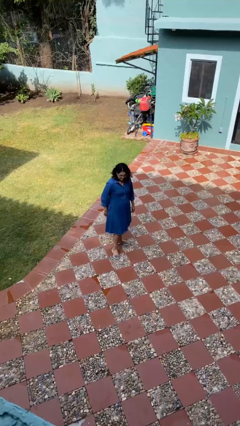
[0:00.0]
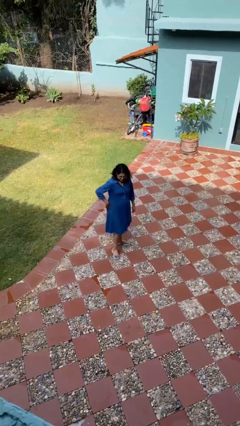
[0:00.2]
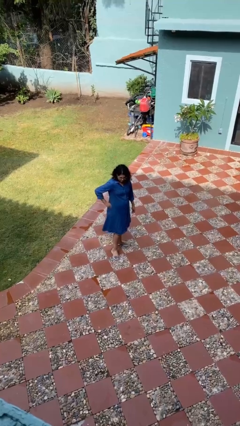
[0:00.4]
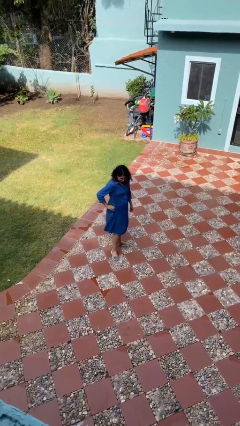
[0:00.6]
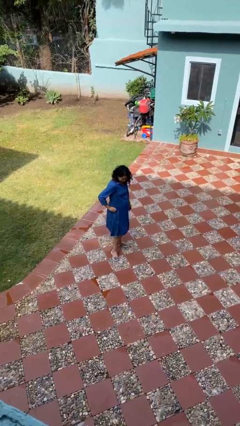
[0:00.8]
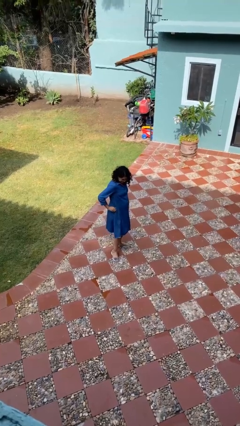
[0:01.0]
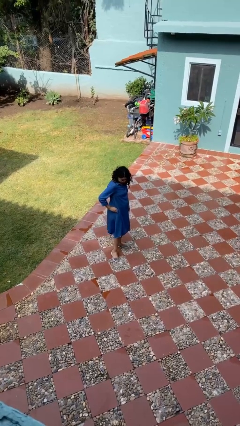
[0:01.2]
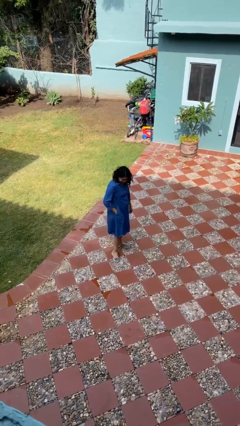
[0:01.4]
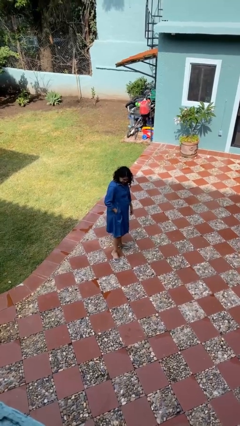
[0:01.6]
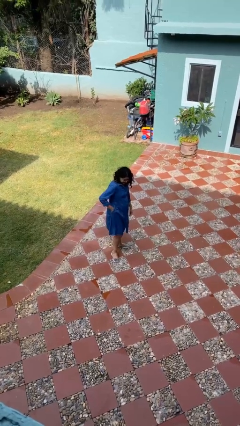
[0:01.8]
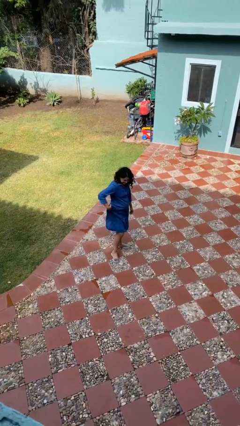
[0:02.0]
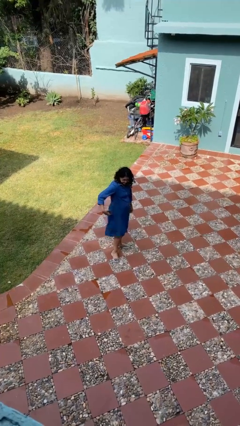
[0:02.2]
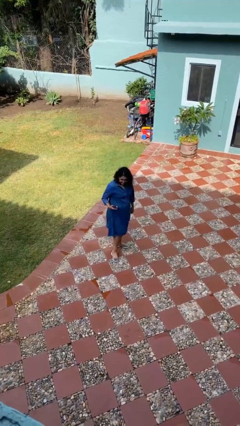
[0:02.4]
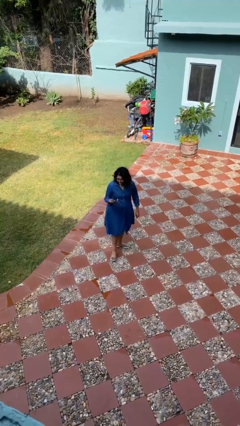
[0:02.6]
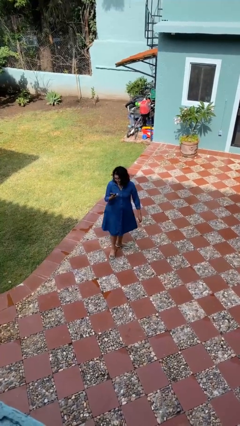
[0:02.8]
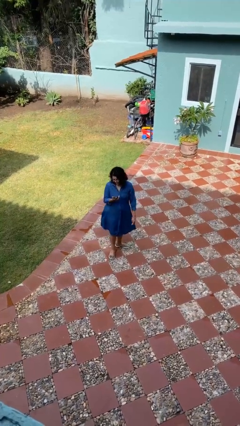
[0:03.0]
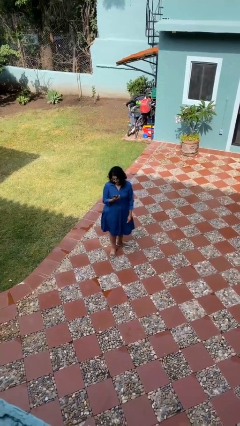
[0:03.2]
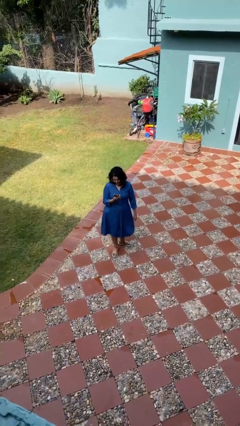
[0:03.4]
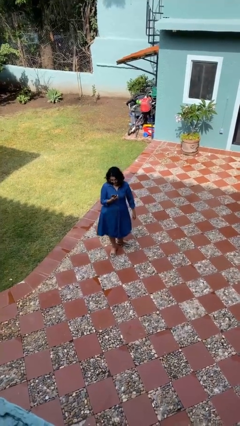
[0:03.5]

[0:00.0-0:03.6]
person takes phone from pocket

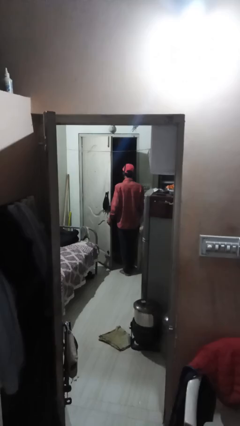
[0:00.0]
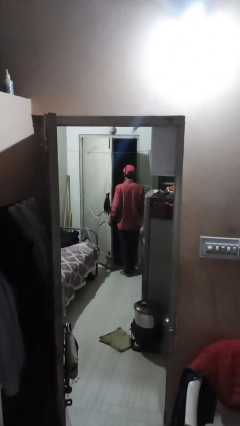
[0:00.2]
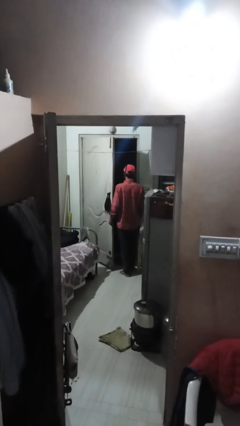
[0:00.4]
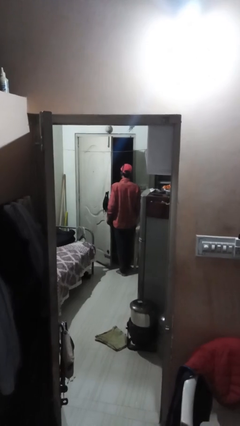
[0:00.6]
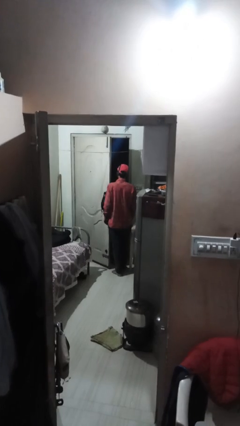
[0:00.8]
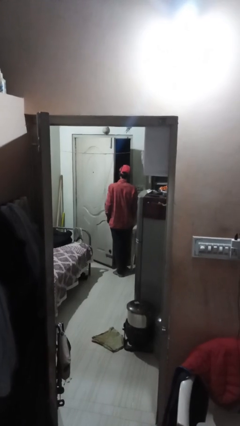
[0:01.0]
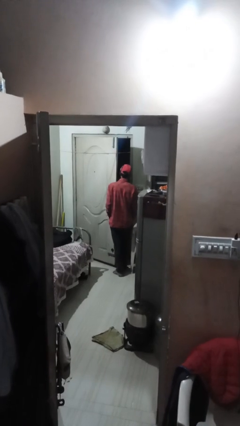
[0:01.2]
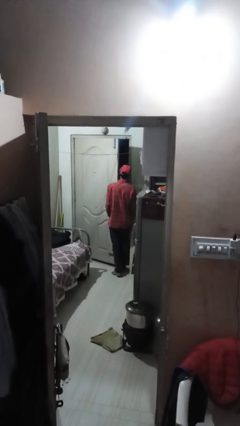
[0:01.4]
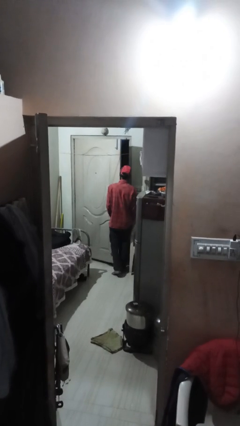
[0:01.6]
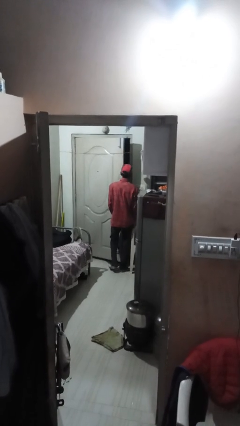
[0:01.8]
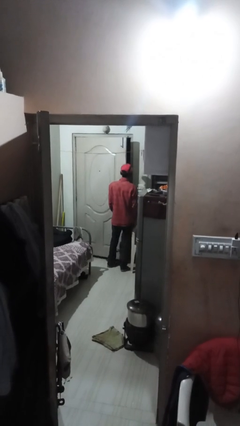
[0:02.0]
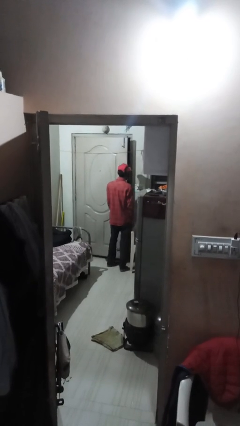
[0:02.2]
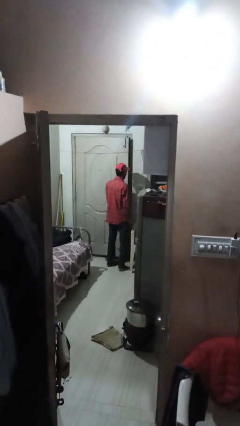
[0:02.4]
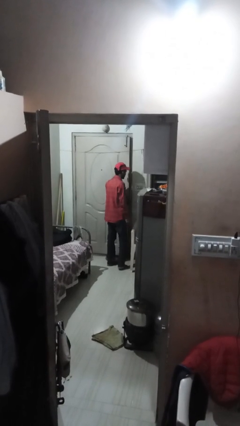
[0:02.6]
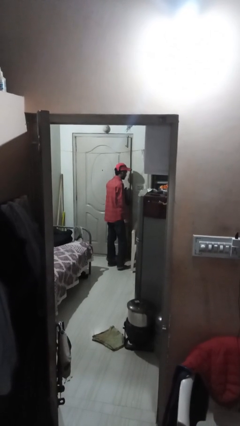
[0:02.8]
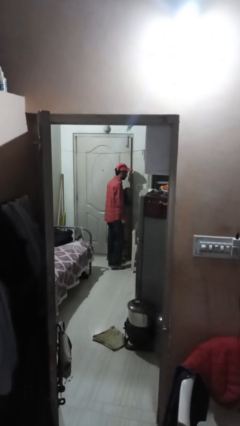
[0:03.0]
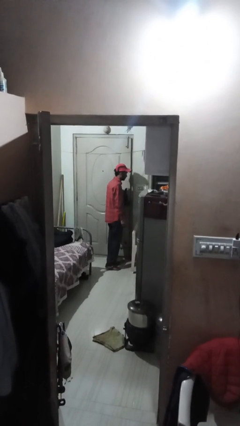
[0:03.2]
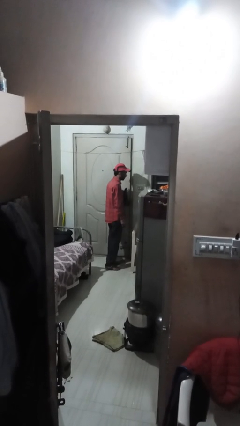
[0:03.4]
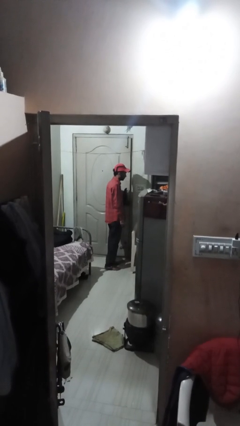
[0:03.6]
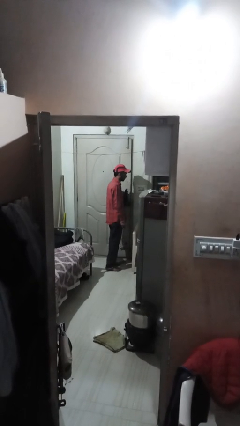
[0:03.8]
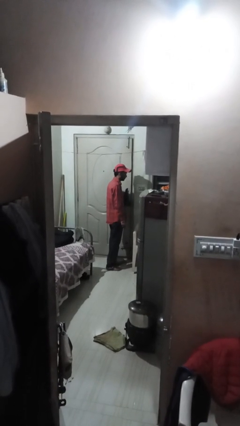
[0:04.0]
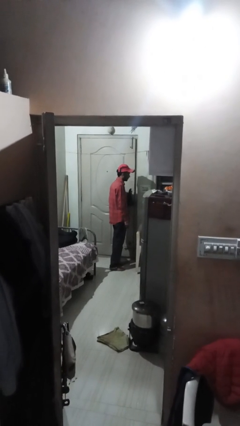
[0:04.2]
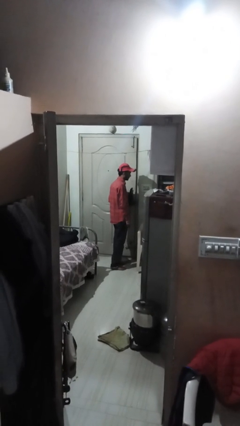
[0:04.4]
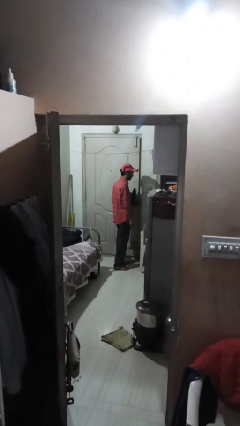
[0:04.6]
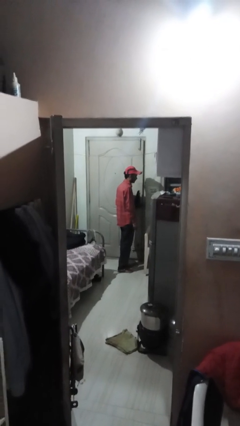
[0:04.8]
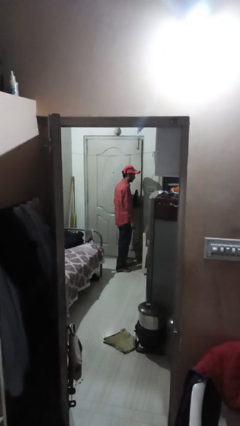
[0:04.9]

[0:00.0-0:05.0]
person closes facility door

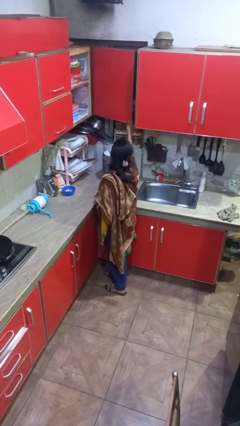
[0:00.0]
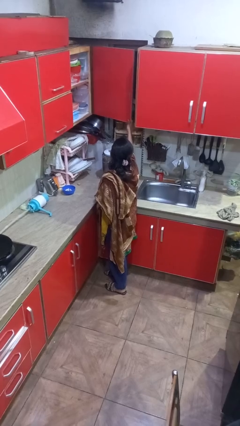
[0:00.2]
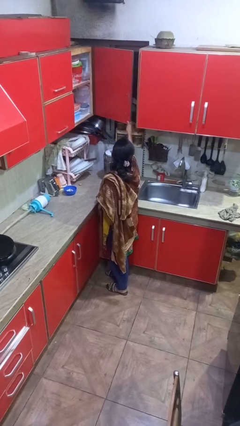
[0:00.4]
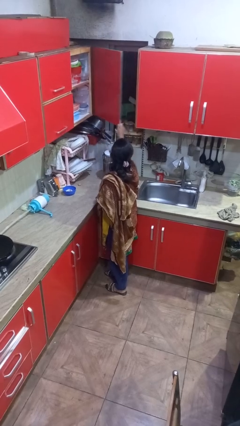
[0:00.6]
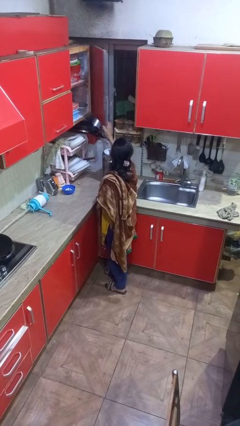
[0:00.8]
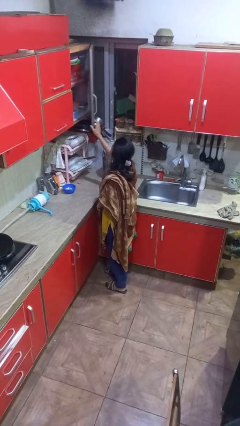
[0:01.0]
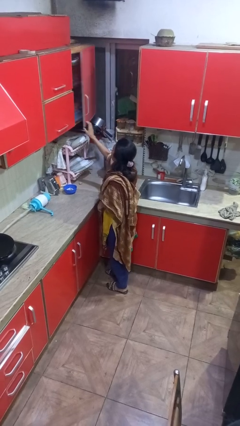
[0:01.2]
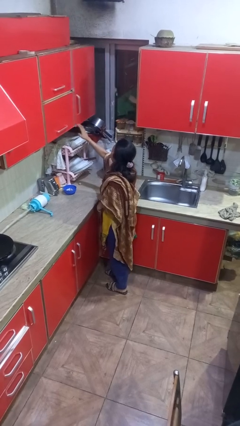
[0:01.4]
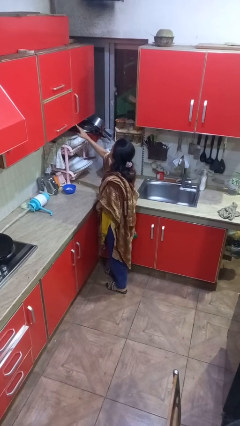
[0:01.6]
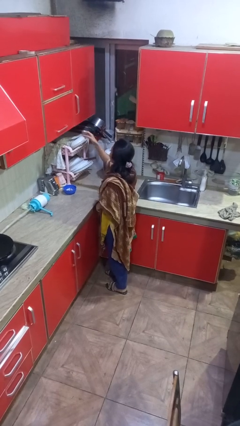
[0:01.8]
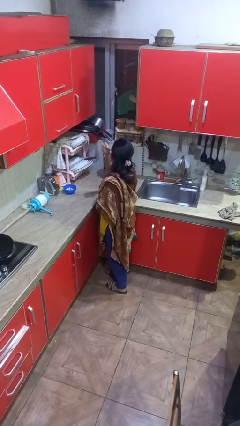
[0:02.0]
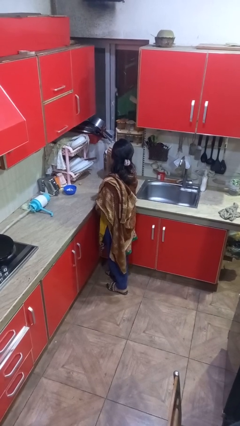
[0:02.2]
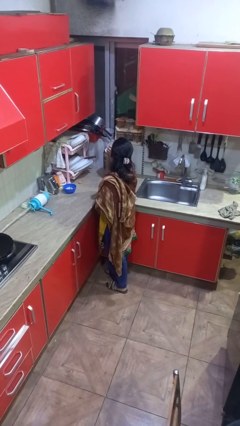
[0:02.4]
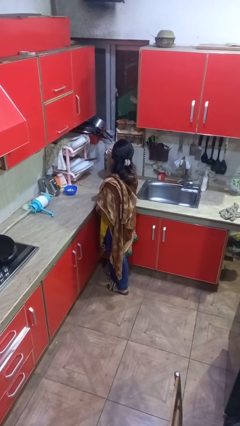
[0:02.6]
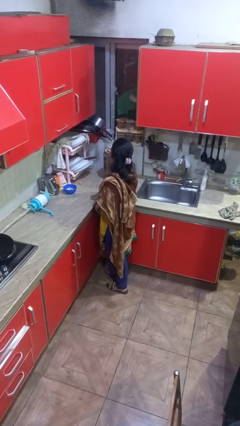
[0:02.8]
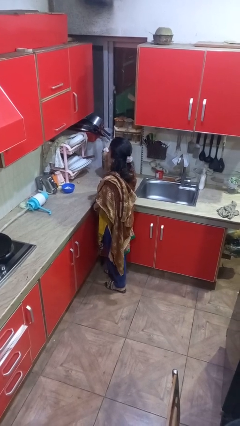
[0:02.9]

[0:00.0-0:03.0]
person closes cabinet

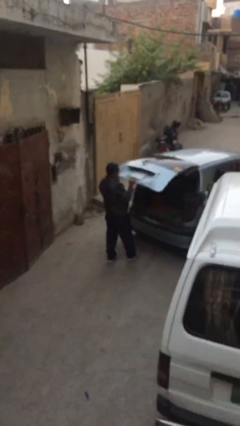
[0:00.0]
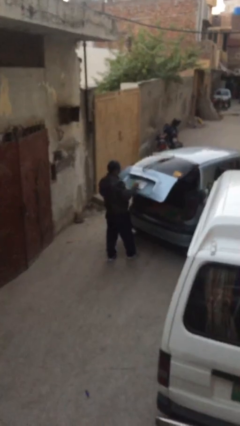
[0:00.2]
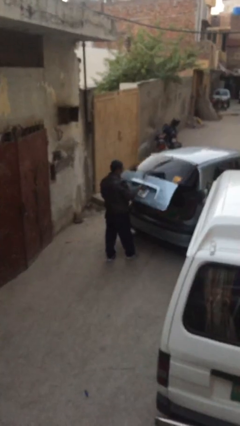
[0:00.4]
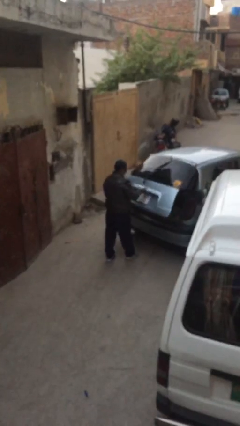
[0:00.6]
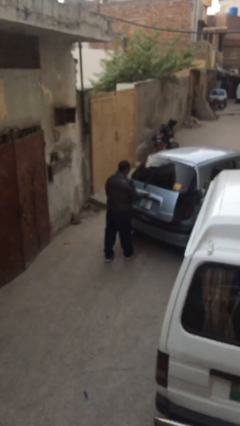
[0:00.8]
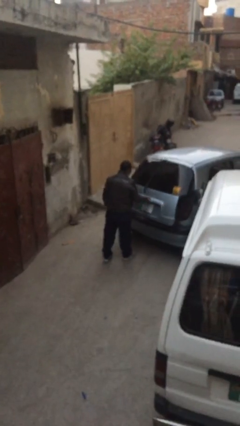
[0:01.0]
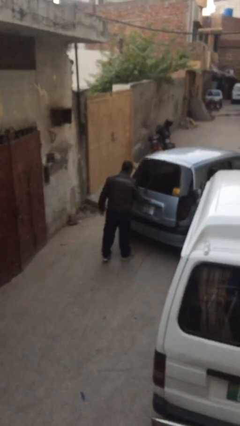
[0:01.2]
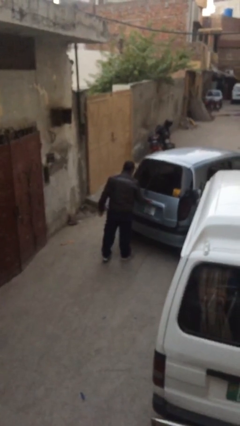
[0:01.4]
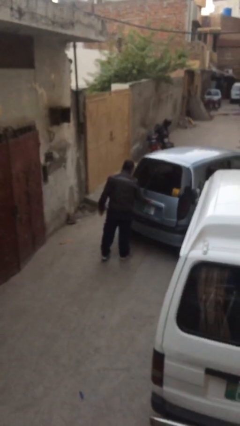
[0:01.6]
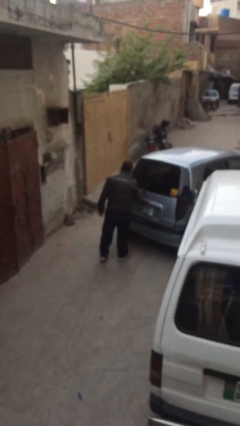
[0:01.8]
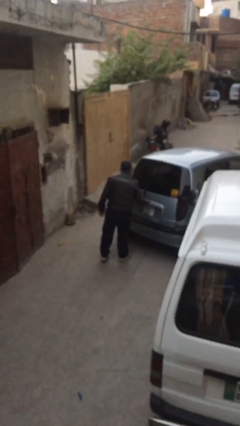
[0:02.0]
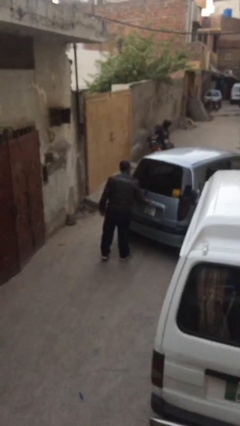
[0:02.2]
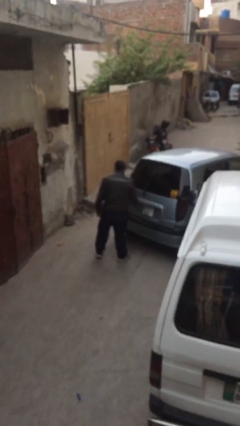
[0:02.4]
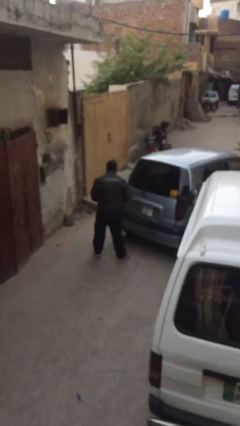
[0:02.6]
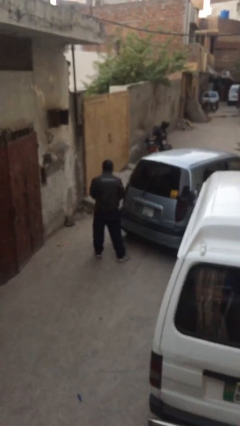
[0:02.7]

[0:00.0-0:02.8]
person closes car trunk

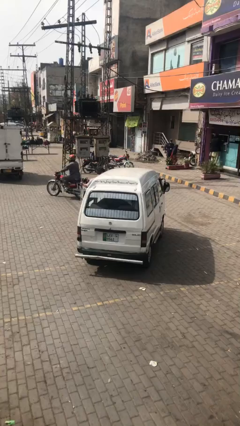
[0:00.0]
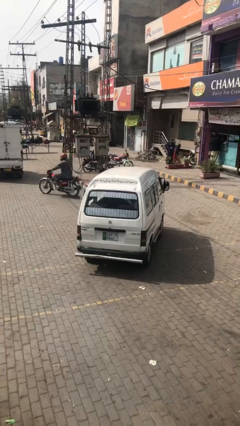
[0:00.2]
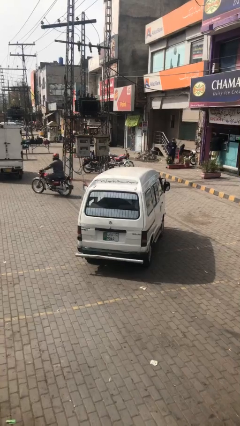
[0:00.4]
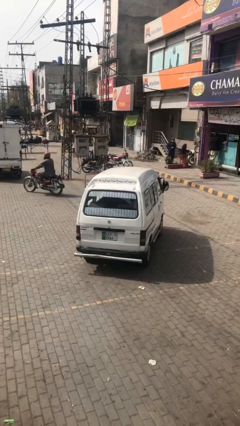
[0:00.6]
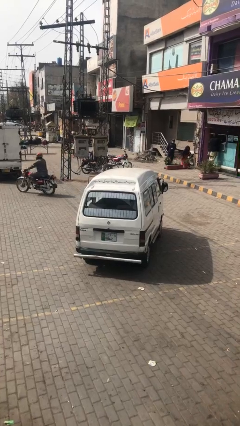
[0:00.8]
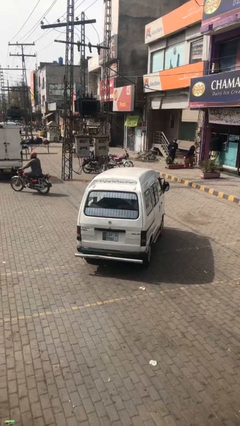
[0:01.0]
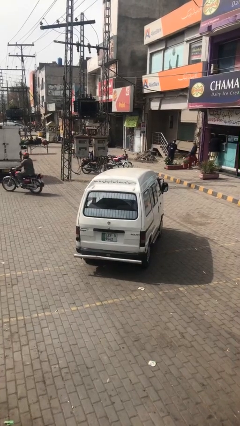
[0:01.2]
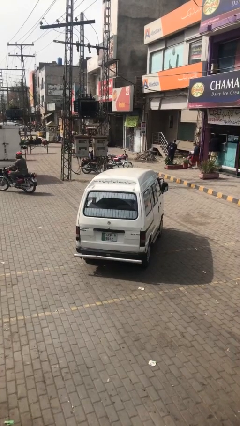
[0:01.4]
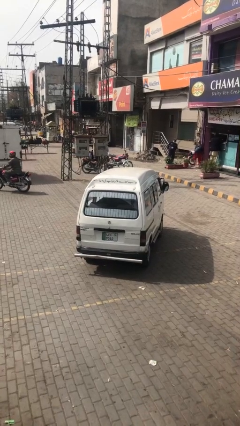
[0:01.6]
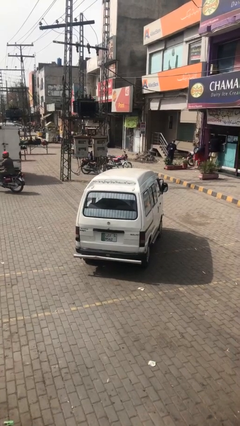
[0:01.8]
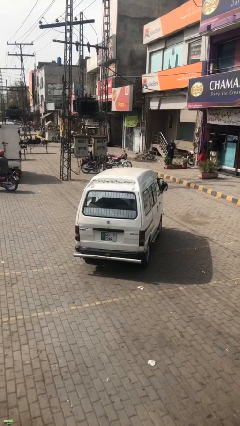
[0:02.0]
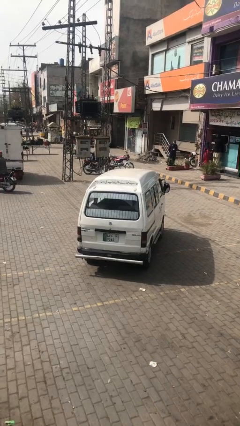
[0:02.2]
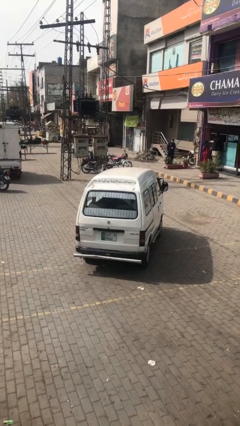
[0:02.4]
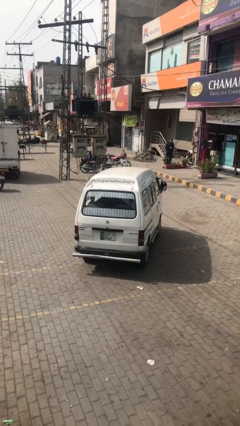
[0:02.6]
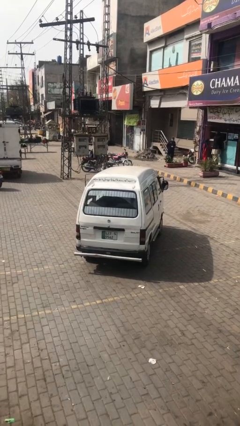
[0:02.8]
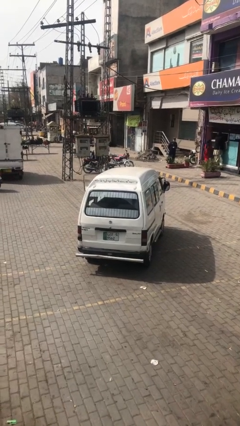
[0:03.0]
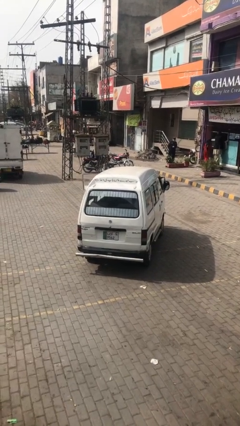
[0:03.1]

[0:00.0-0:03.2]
car picks up person
